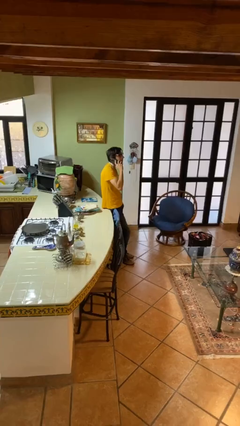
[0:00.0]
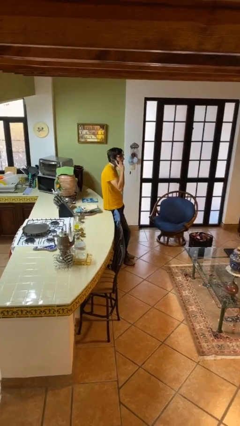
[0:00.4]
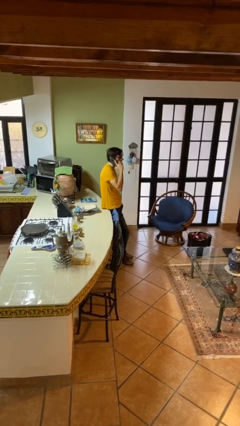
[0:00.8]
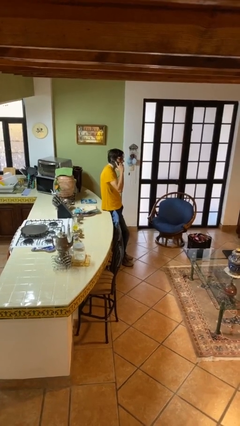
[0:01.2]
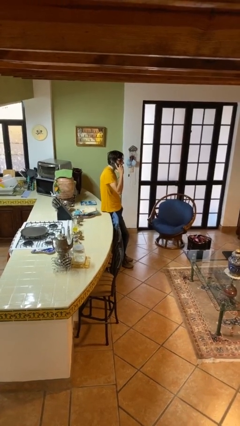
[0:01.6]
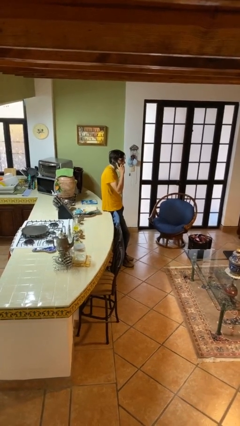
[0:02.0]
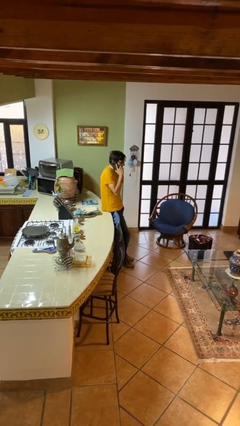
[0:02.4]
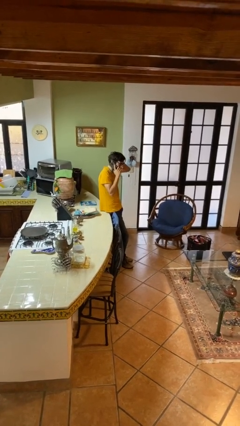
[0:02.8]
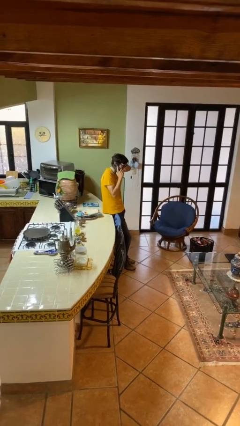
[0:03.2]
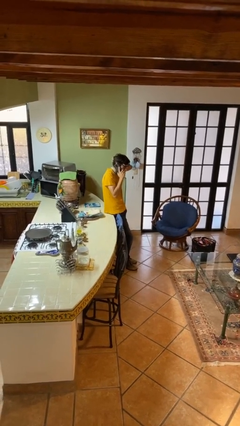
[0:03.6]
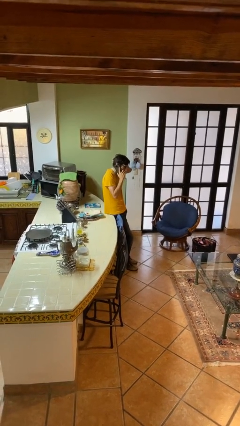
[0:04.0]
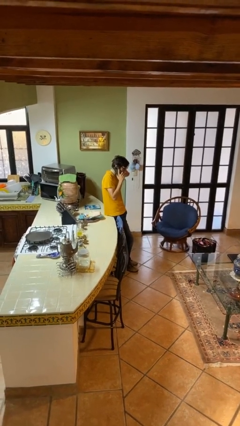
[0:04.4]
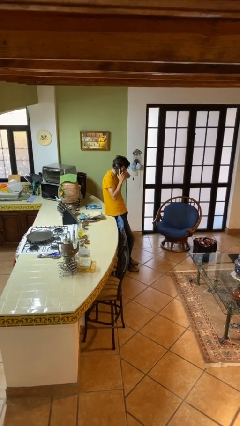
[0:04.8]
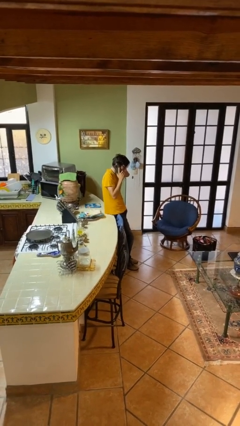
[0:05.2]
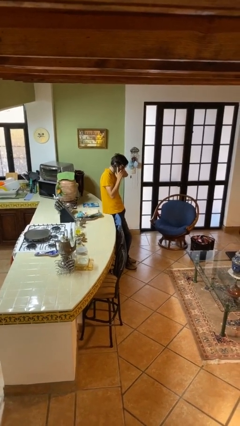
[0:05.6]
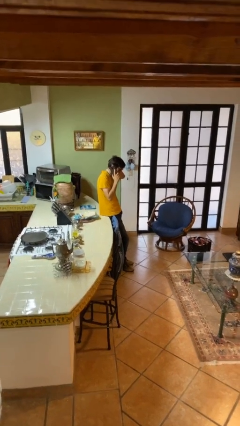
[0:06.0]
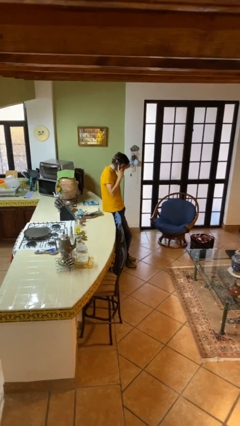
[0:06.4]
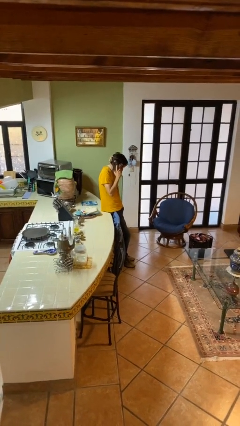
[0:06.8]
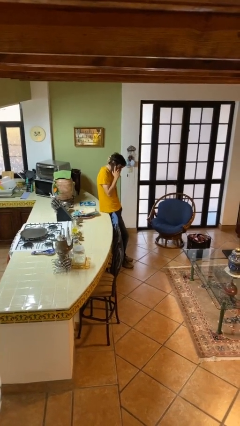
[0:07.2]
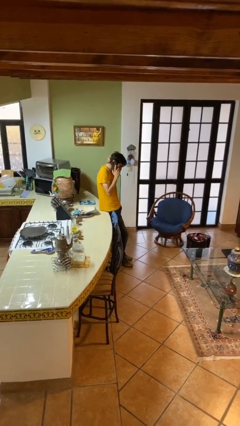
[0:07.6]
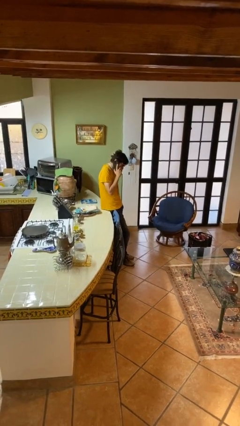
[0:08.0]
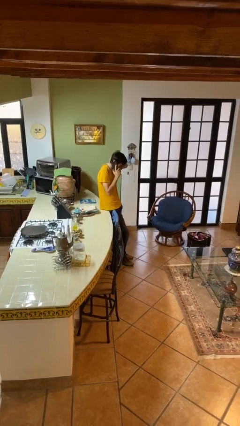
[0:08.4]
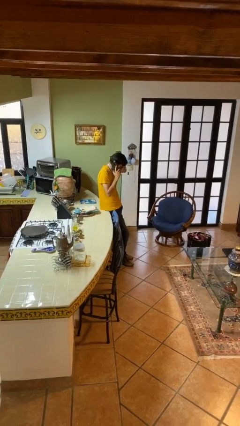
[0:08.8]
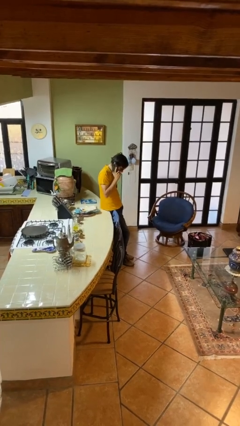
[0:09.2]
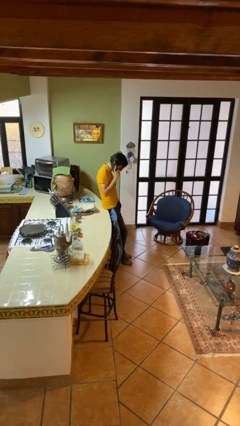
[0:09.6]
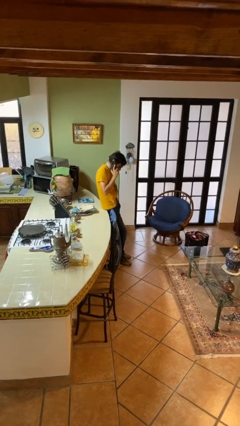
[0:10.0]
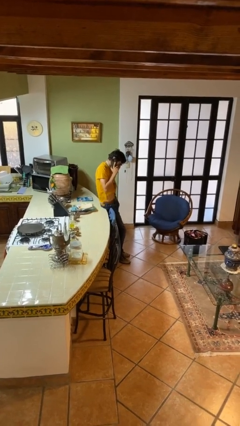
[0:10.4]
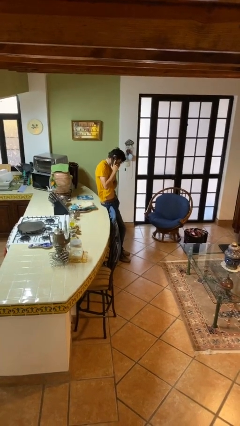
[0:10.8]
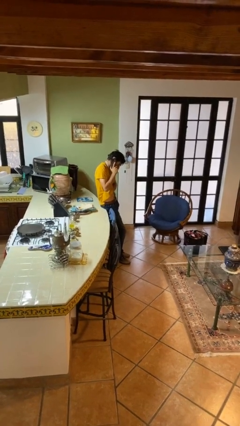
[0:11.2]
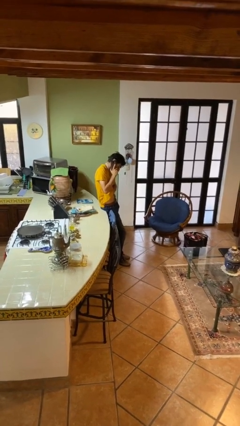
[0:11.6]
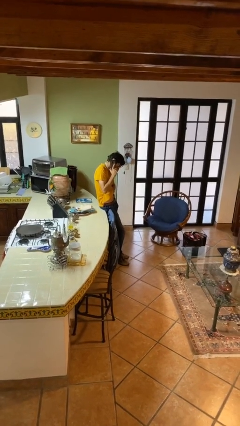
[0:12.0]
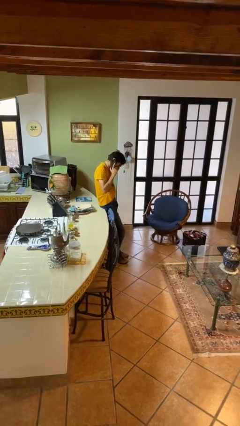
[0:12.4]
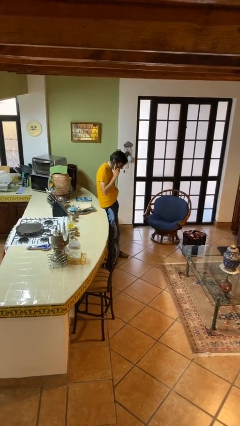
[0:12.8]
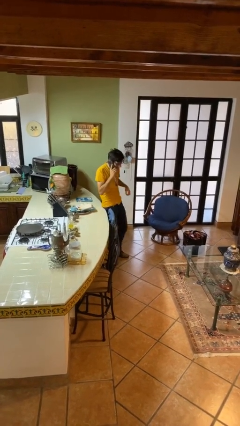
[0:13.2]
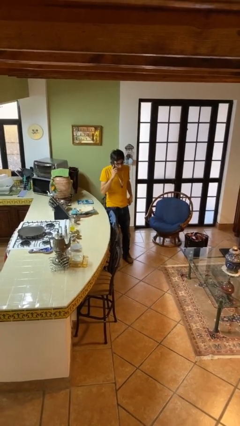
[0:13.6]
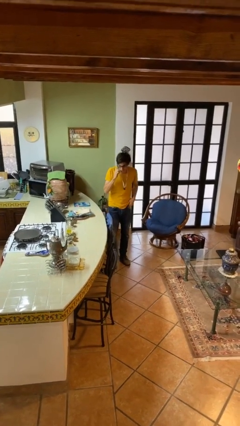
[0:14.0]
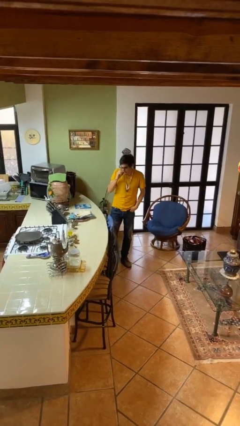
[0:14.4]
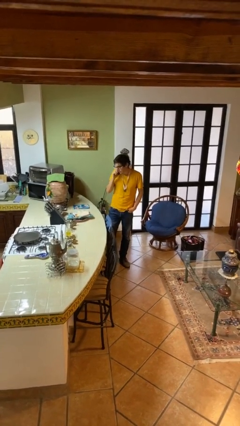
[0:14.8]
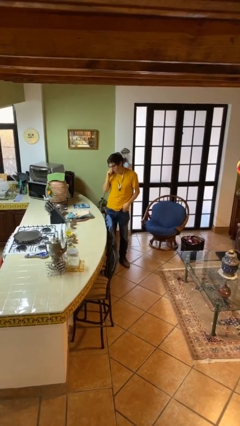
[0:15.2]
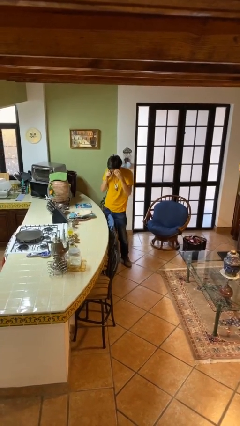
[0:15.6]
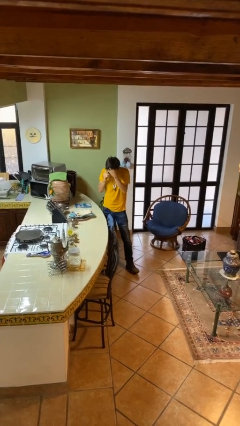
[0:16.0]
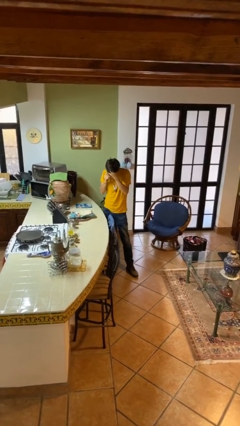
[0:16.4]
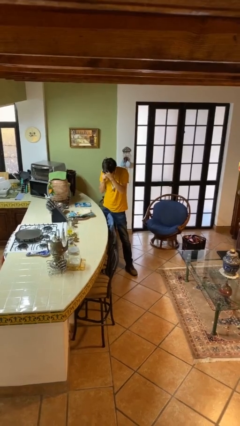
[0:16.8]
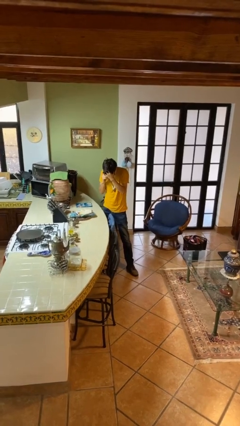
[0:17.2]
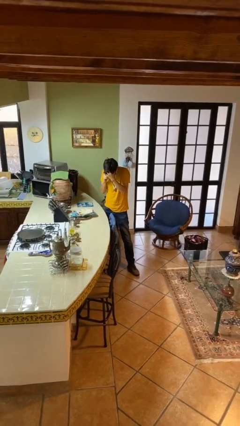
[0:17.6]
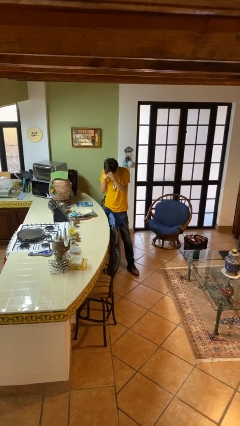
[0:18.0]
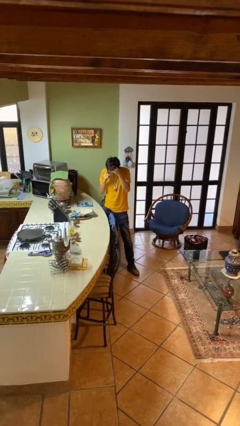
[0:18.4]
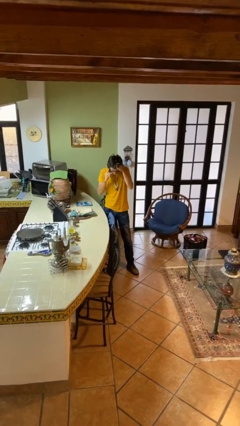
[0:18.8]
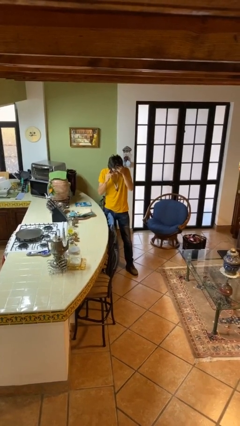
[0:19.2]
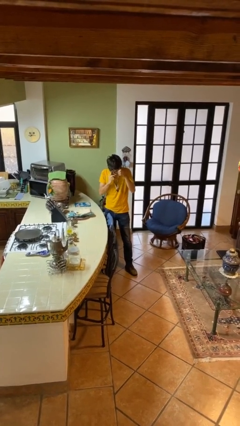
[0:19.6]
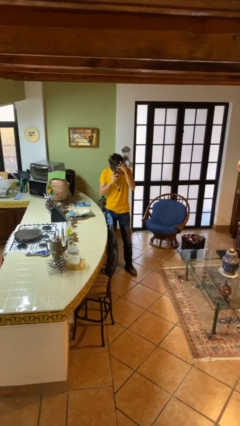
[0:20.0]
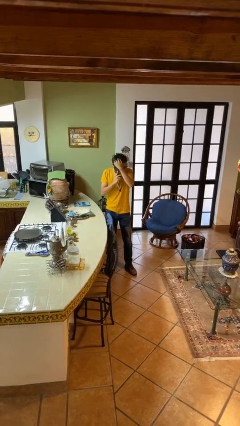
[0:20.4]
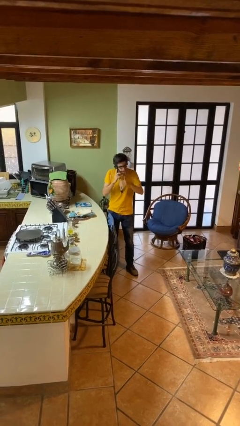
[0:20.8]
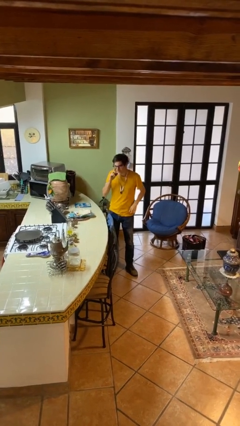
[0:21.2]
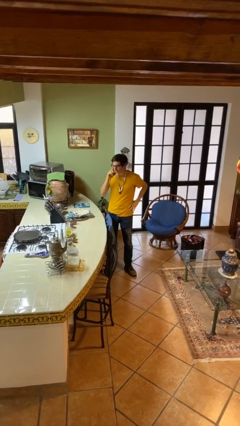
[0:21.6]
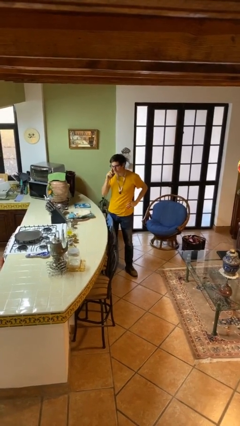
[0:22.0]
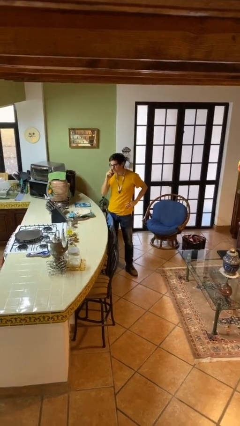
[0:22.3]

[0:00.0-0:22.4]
person talks on phone

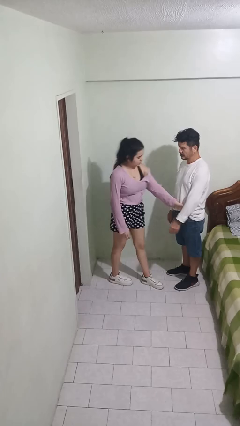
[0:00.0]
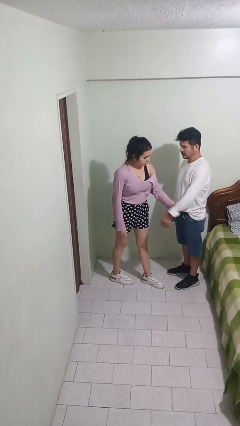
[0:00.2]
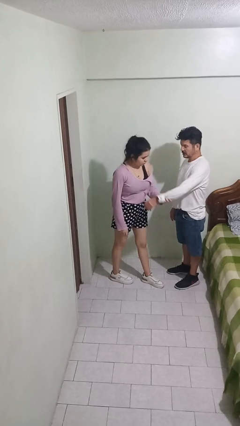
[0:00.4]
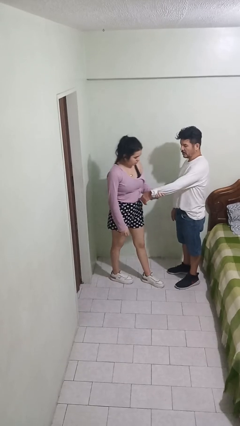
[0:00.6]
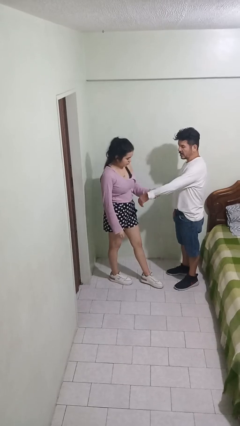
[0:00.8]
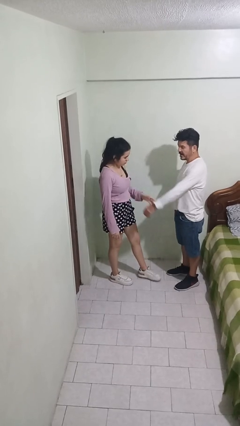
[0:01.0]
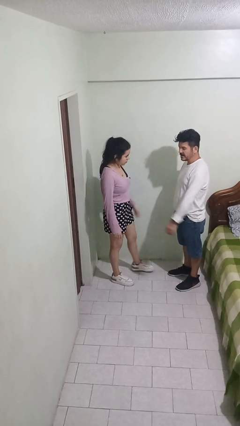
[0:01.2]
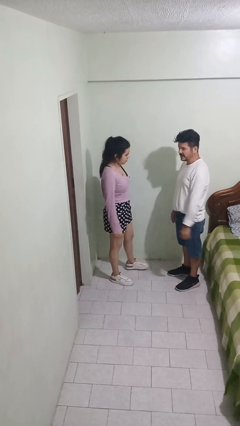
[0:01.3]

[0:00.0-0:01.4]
person grabs person by forearm

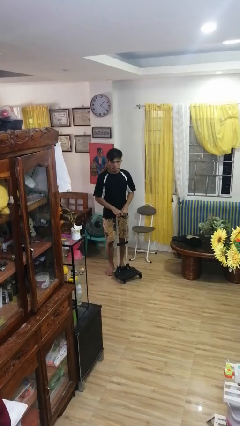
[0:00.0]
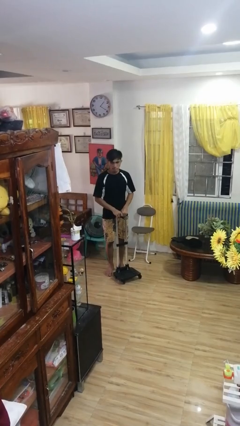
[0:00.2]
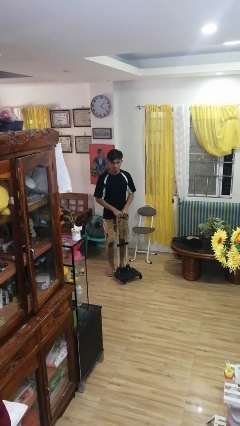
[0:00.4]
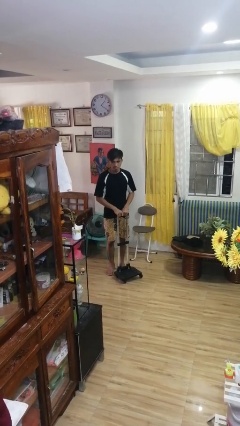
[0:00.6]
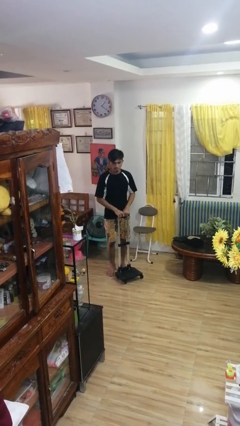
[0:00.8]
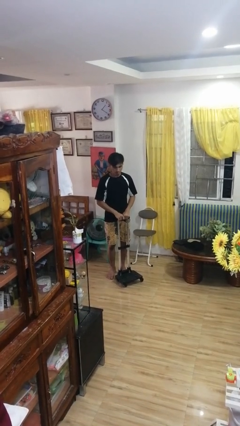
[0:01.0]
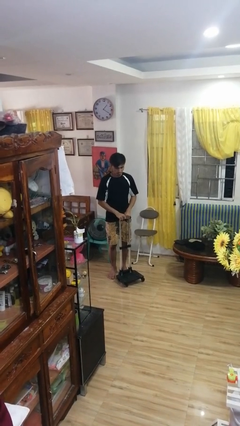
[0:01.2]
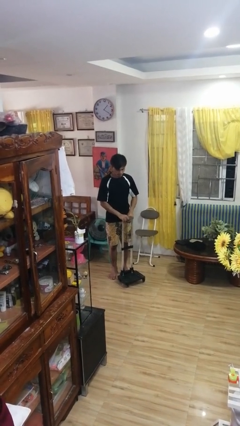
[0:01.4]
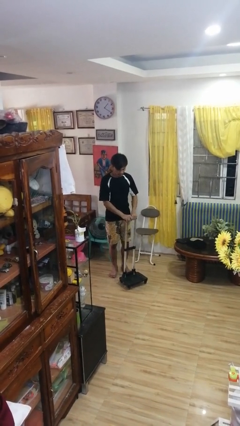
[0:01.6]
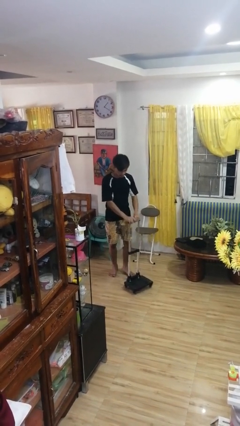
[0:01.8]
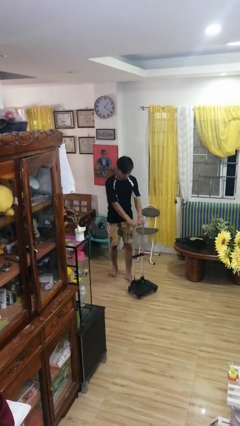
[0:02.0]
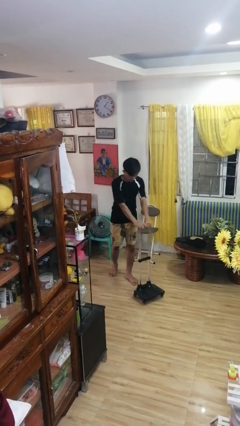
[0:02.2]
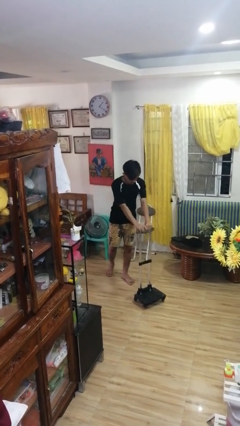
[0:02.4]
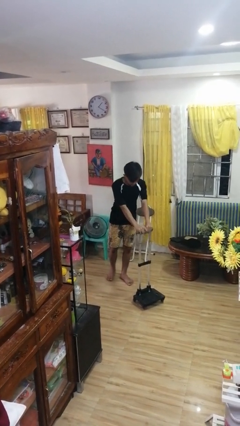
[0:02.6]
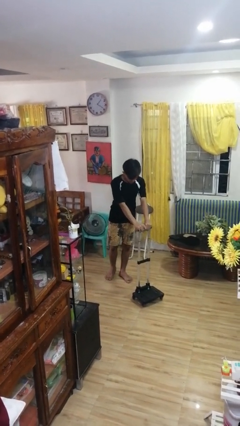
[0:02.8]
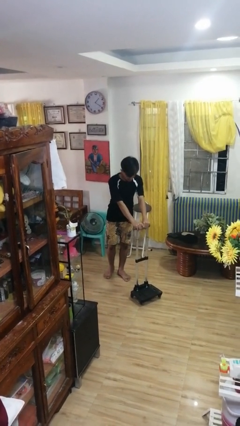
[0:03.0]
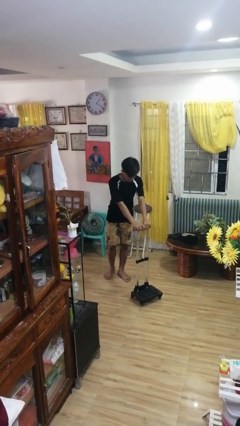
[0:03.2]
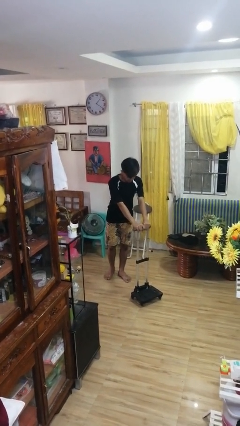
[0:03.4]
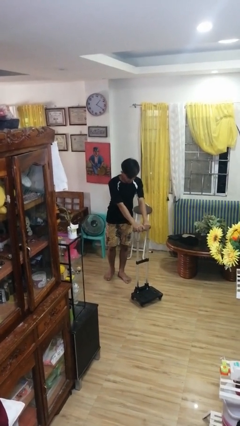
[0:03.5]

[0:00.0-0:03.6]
person pushes wheeled cart

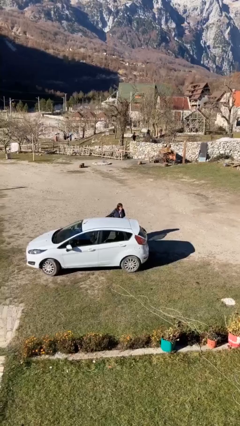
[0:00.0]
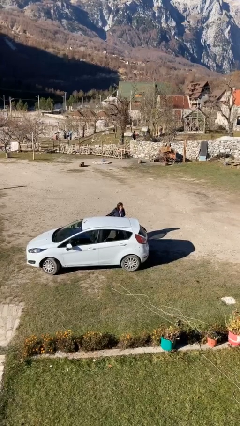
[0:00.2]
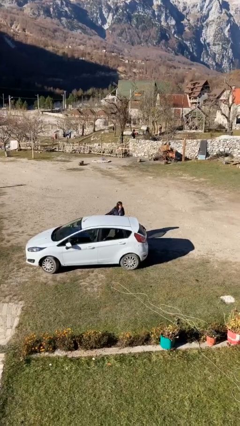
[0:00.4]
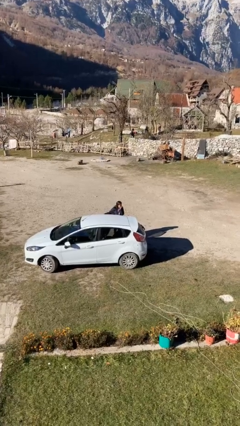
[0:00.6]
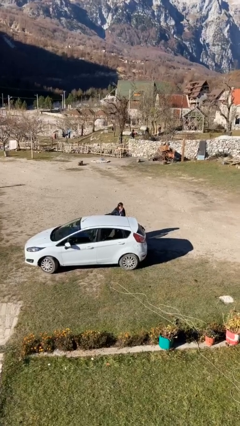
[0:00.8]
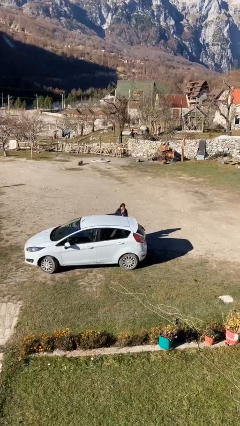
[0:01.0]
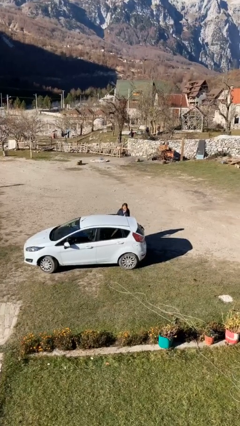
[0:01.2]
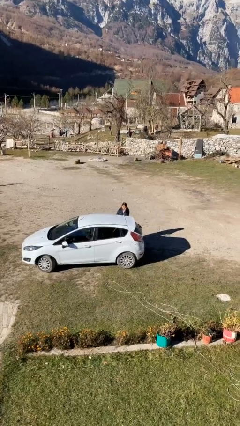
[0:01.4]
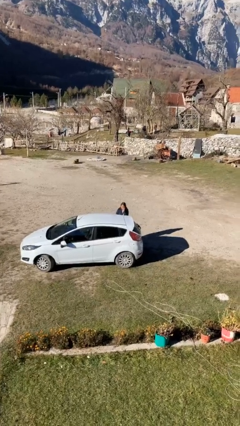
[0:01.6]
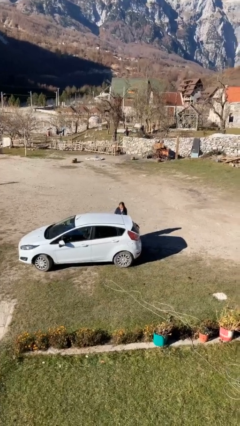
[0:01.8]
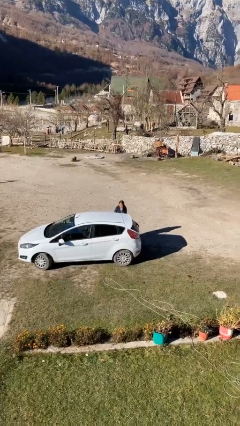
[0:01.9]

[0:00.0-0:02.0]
person closes car door
